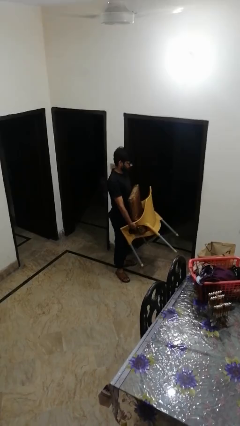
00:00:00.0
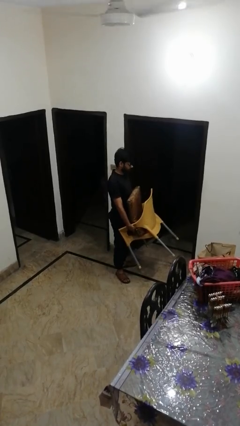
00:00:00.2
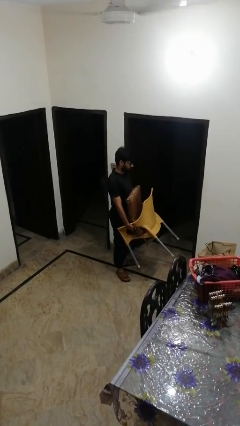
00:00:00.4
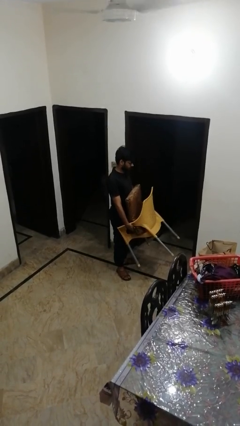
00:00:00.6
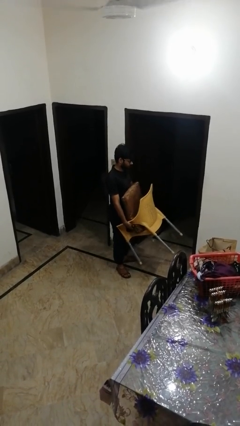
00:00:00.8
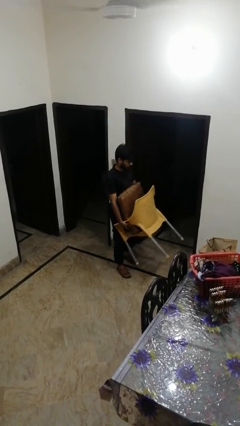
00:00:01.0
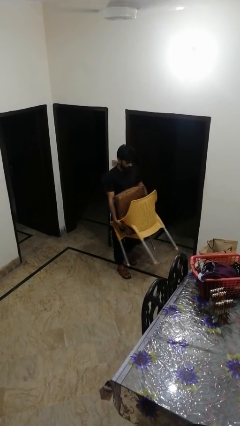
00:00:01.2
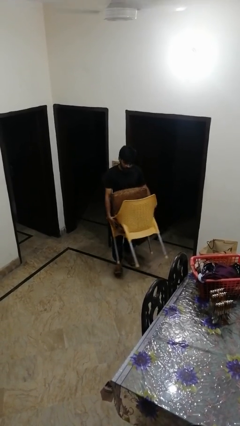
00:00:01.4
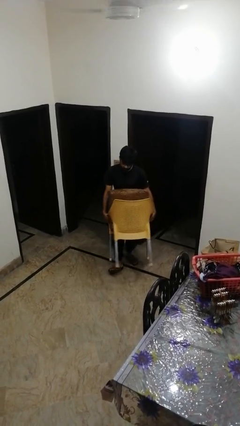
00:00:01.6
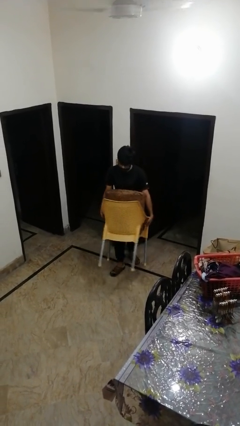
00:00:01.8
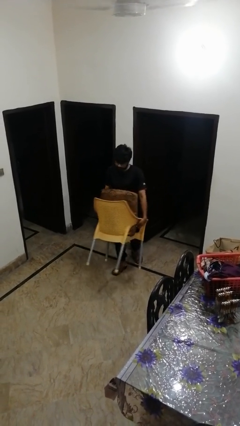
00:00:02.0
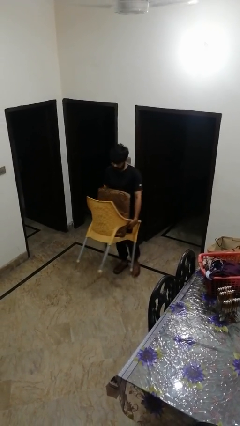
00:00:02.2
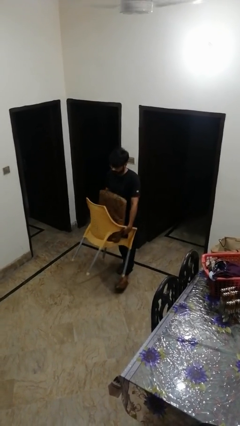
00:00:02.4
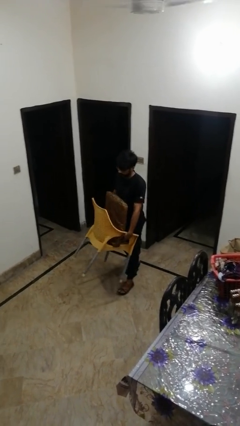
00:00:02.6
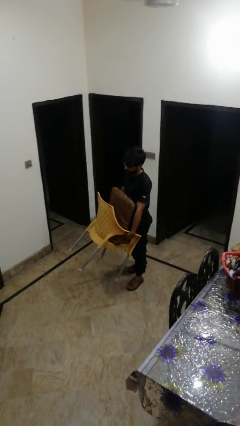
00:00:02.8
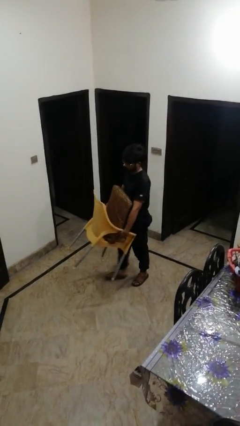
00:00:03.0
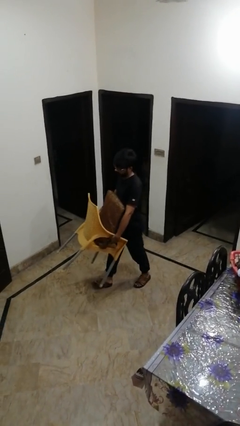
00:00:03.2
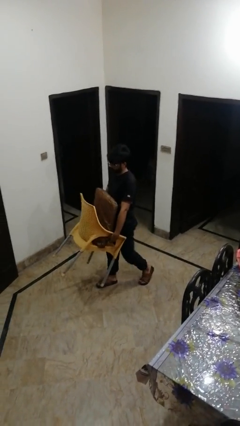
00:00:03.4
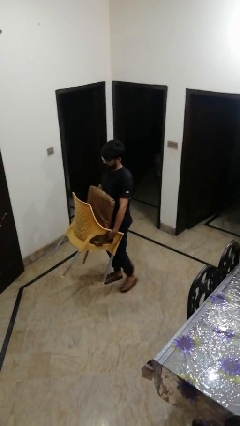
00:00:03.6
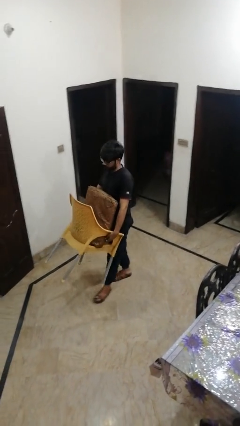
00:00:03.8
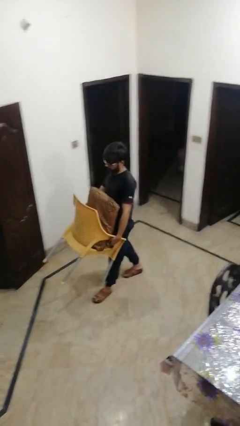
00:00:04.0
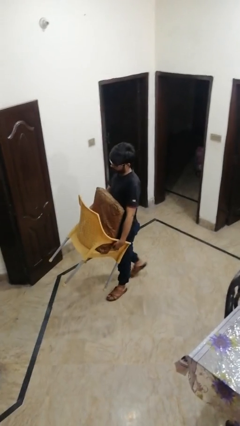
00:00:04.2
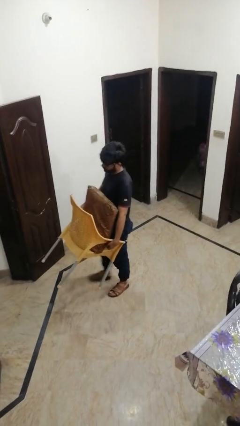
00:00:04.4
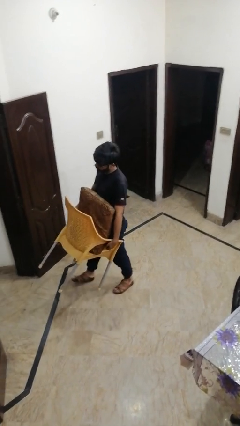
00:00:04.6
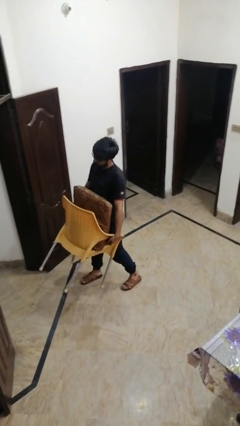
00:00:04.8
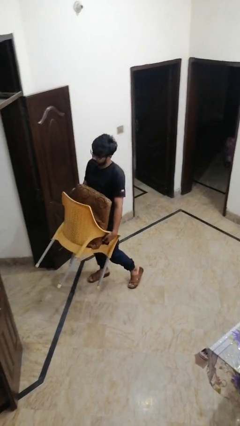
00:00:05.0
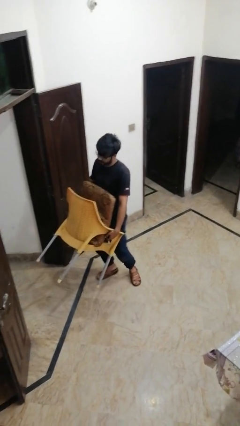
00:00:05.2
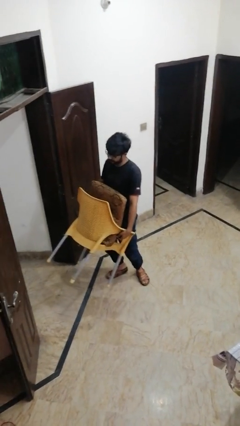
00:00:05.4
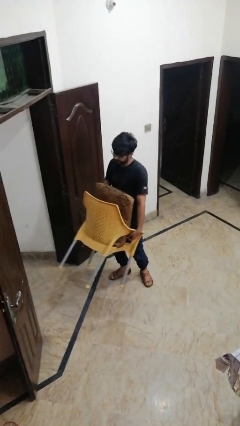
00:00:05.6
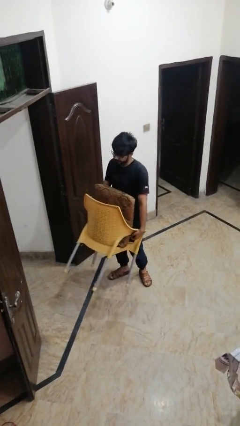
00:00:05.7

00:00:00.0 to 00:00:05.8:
person carries furniture

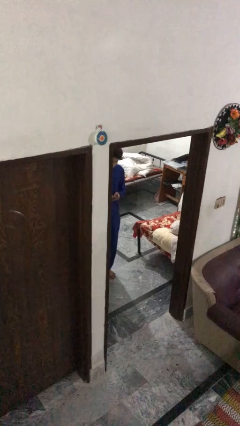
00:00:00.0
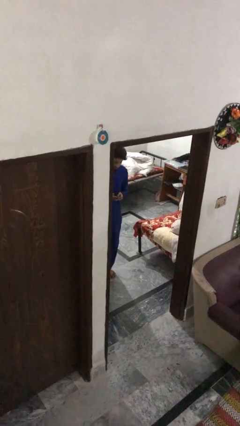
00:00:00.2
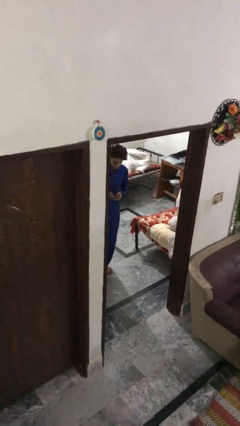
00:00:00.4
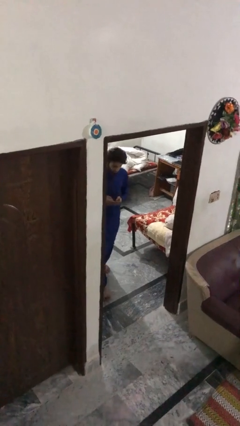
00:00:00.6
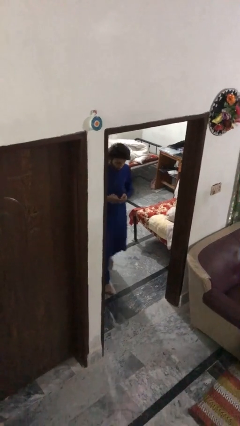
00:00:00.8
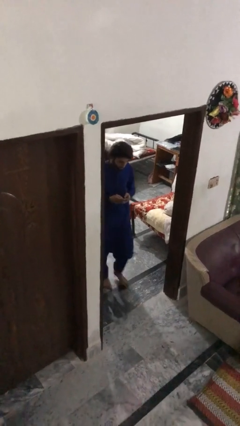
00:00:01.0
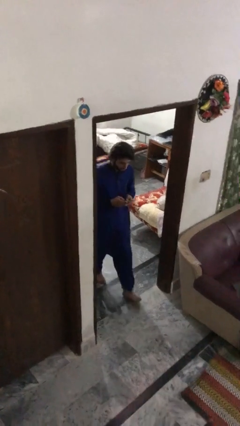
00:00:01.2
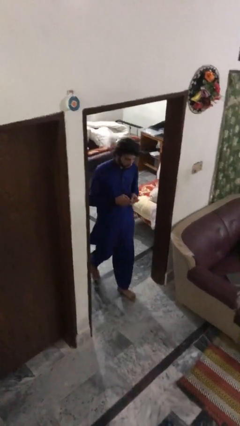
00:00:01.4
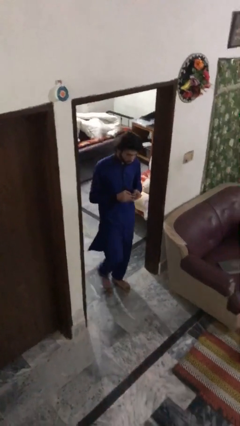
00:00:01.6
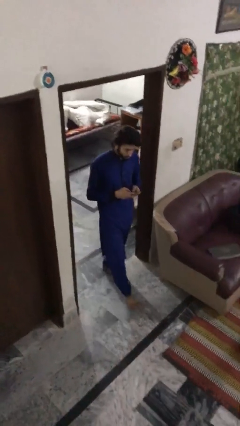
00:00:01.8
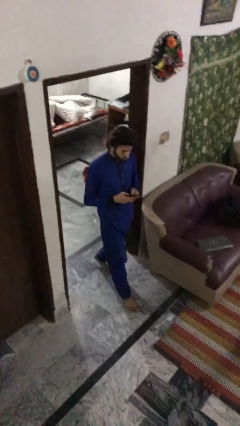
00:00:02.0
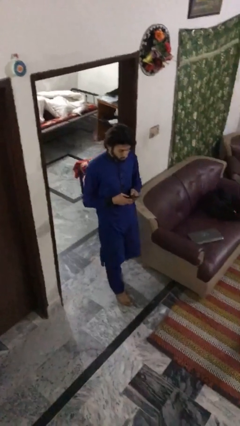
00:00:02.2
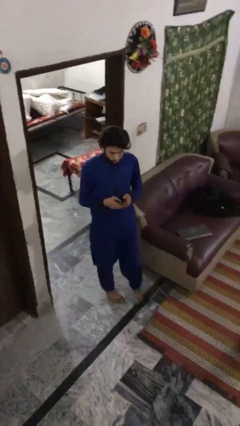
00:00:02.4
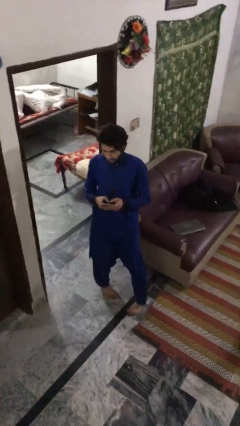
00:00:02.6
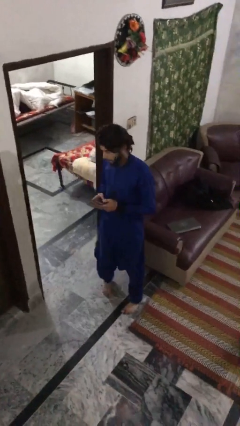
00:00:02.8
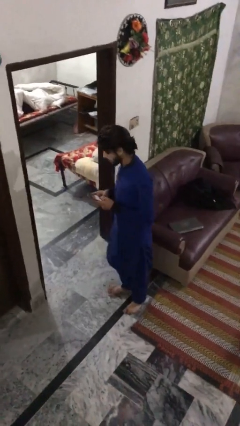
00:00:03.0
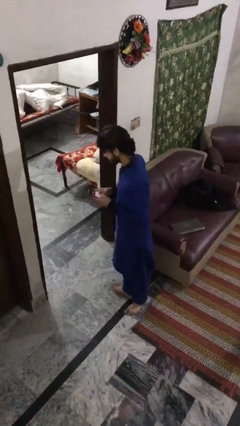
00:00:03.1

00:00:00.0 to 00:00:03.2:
person enters scene through structure

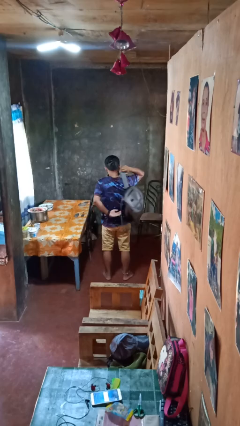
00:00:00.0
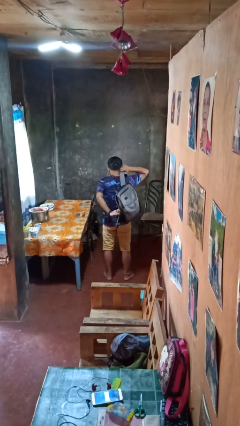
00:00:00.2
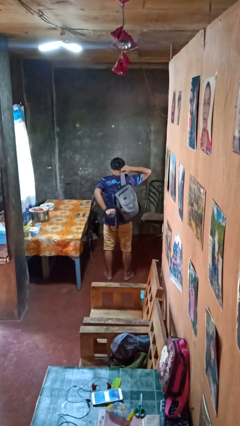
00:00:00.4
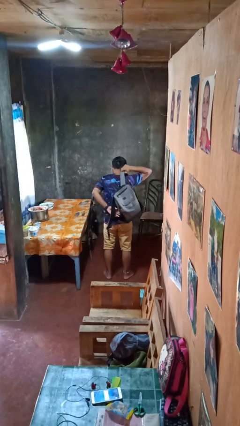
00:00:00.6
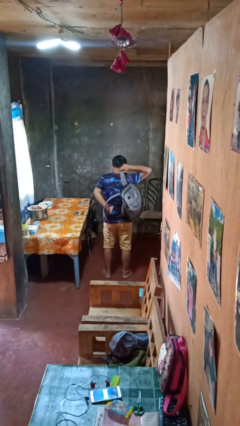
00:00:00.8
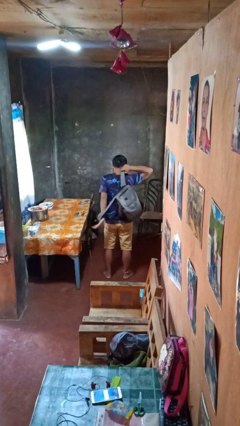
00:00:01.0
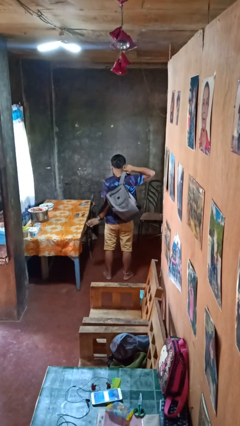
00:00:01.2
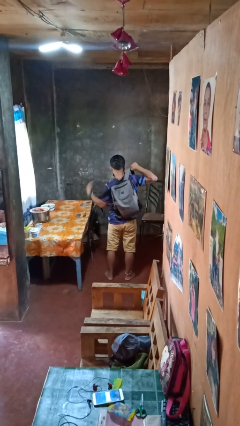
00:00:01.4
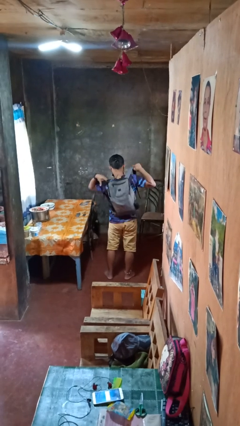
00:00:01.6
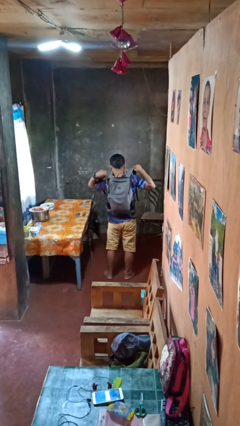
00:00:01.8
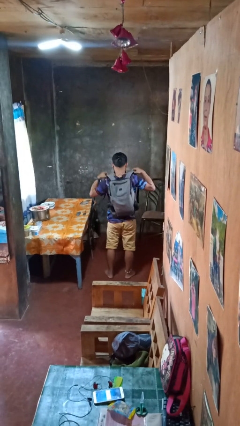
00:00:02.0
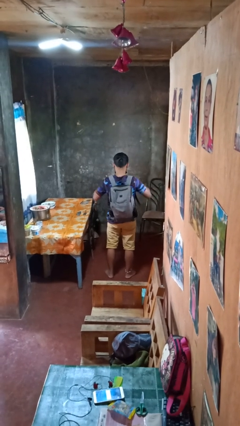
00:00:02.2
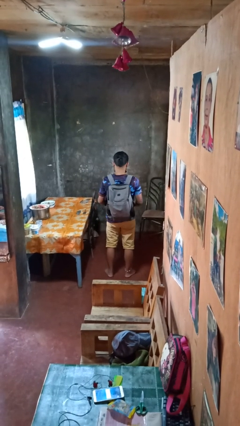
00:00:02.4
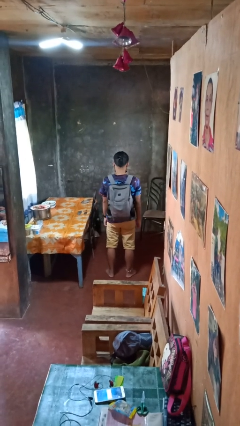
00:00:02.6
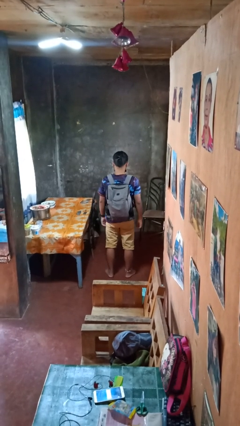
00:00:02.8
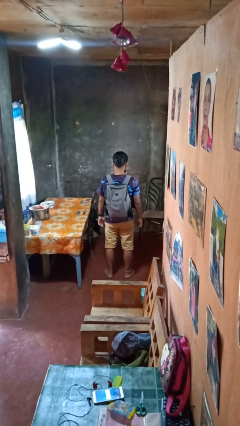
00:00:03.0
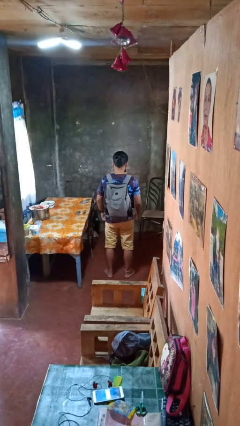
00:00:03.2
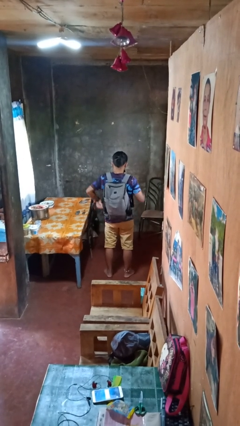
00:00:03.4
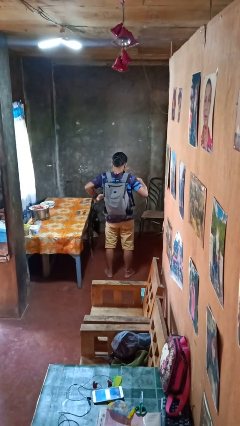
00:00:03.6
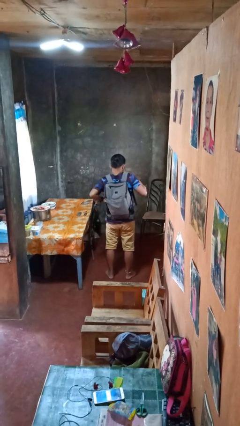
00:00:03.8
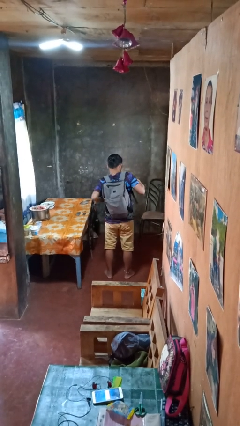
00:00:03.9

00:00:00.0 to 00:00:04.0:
person puts on backpack

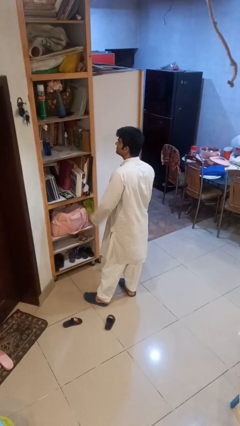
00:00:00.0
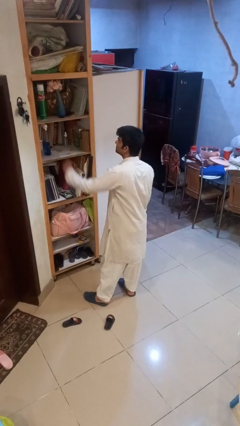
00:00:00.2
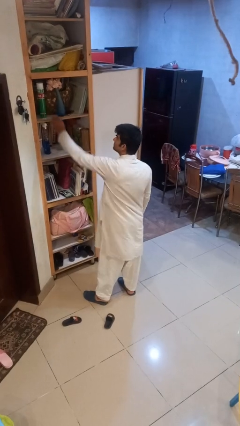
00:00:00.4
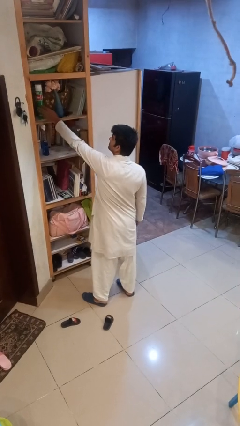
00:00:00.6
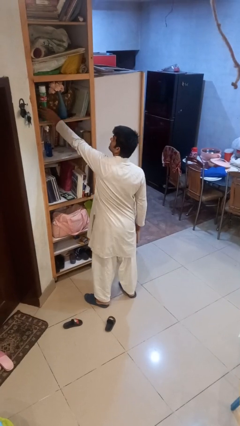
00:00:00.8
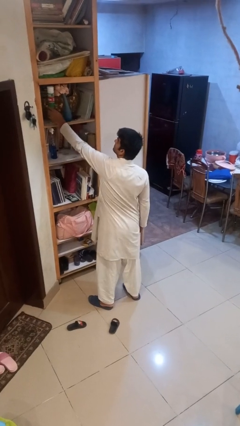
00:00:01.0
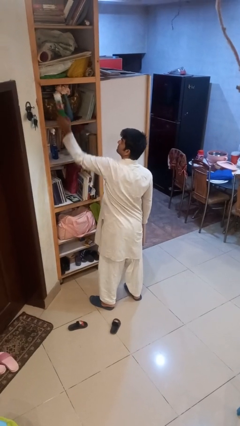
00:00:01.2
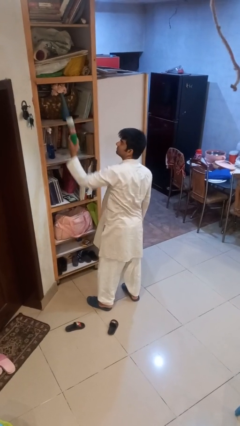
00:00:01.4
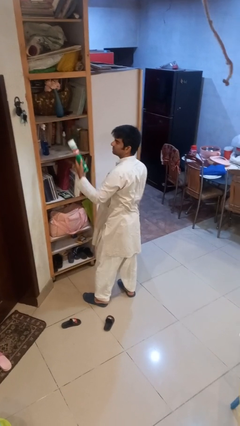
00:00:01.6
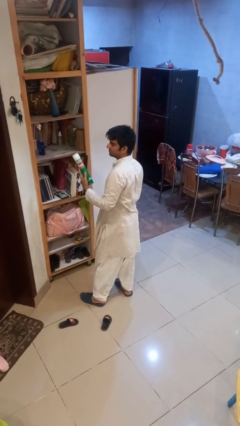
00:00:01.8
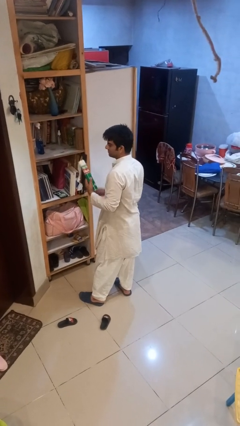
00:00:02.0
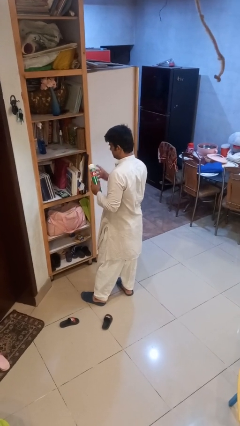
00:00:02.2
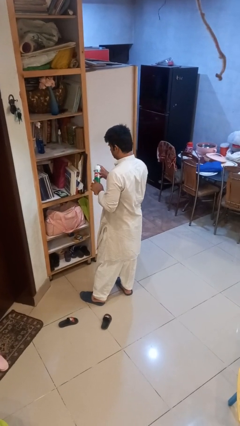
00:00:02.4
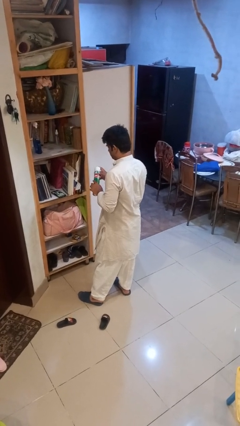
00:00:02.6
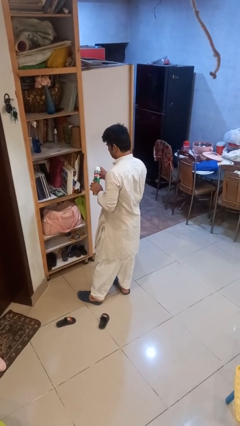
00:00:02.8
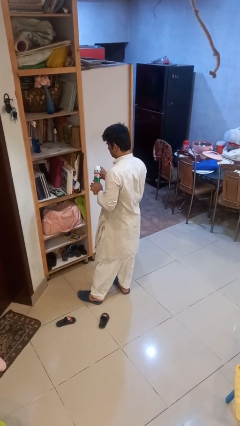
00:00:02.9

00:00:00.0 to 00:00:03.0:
person picks up object from shelf

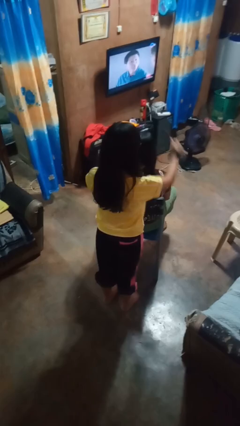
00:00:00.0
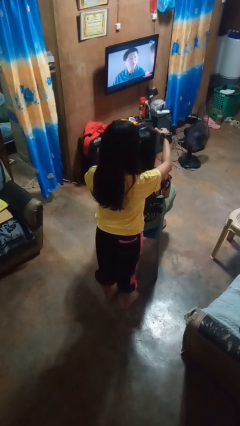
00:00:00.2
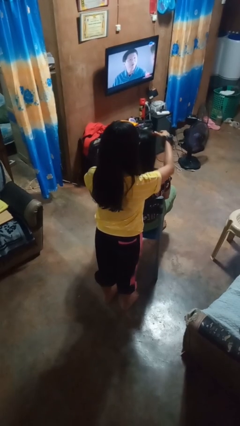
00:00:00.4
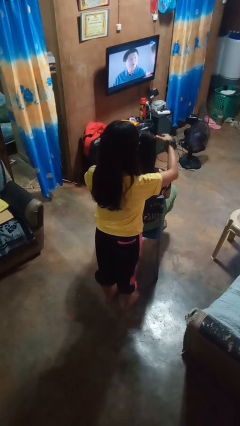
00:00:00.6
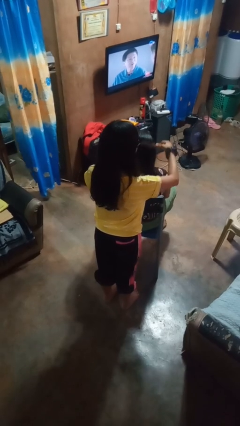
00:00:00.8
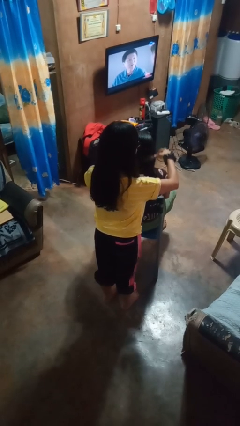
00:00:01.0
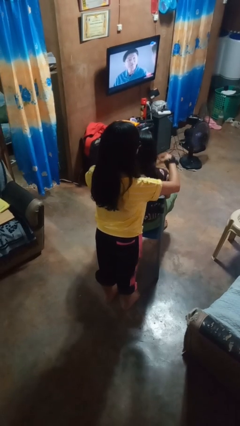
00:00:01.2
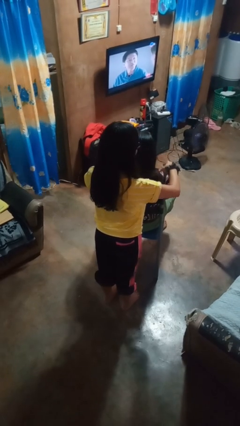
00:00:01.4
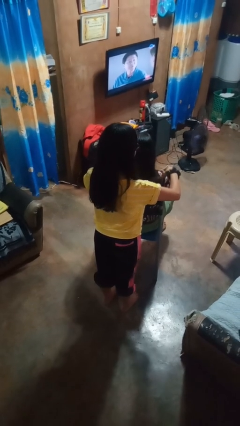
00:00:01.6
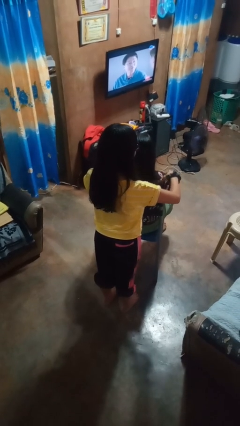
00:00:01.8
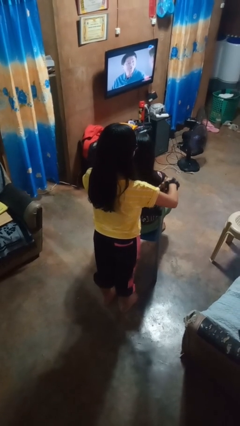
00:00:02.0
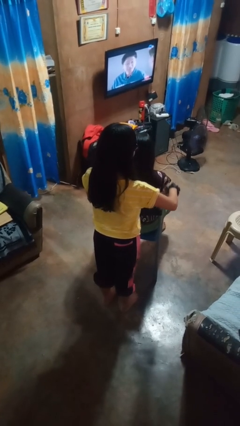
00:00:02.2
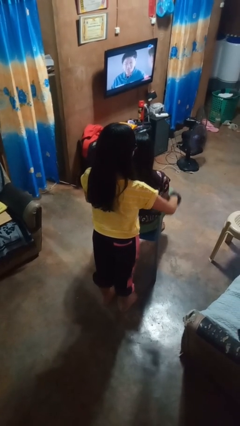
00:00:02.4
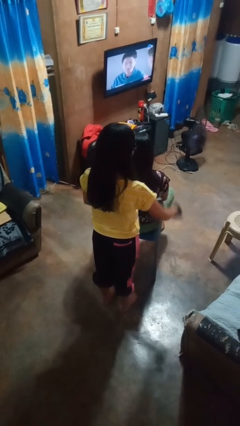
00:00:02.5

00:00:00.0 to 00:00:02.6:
person brushes hair of person
